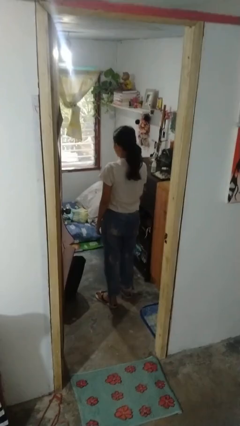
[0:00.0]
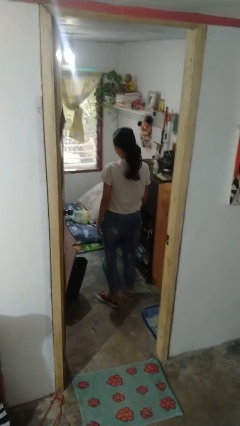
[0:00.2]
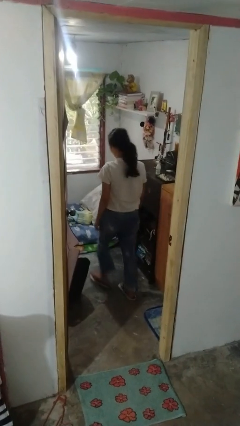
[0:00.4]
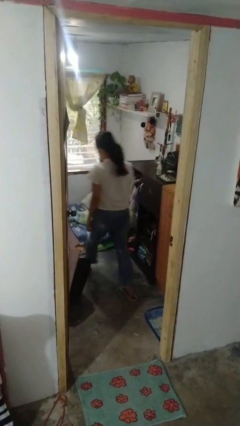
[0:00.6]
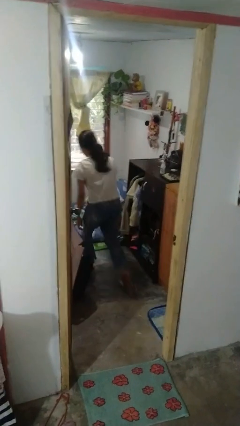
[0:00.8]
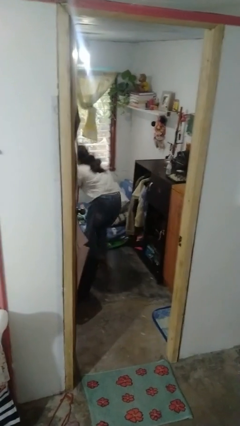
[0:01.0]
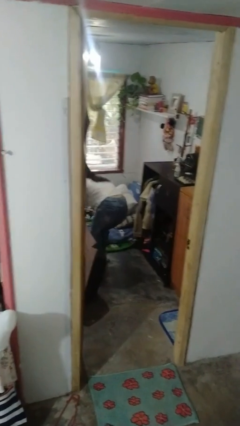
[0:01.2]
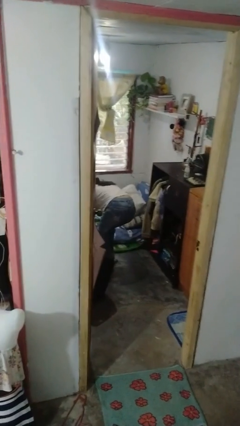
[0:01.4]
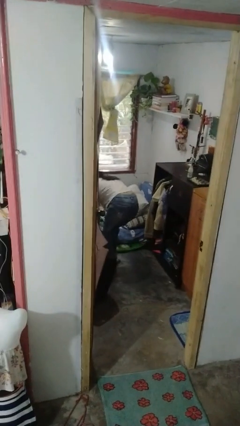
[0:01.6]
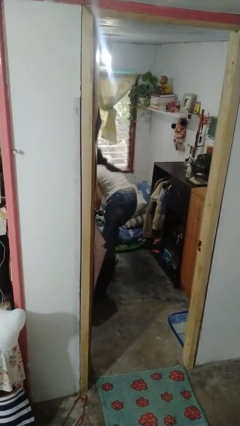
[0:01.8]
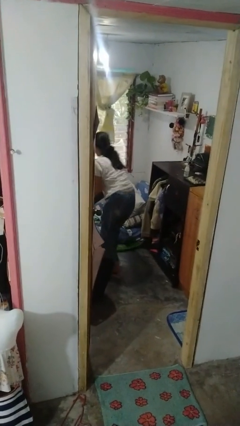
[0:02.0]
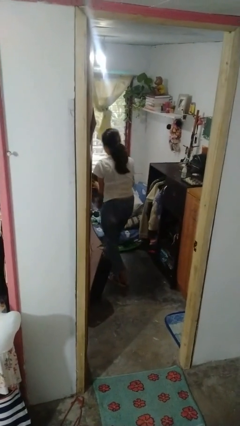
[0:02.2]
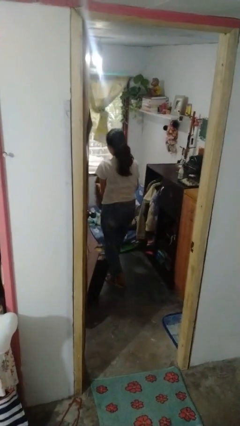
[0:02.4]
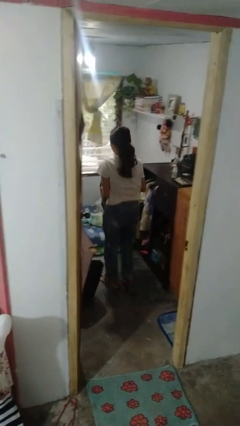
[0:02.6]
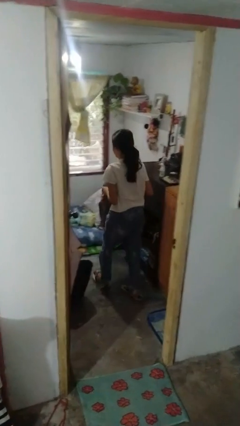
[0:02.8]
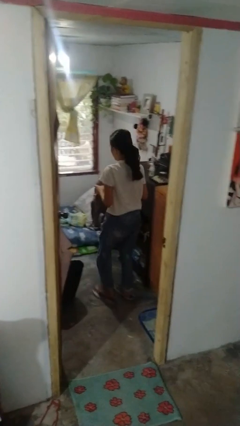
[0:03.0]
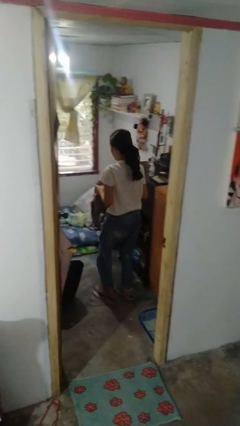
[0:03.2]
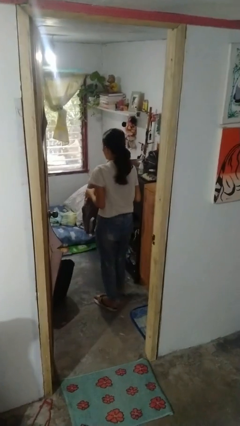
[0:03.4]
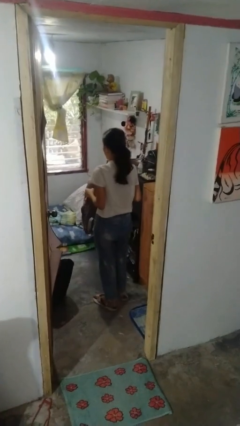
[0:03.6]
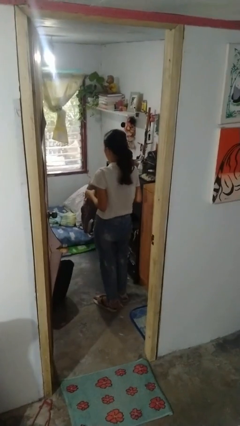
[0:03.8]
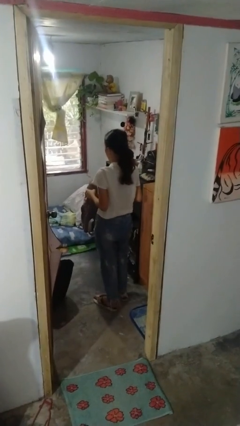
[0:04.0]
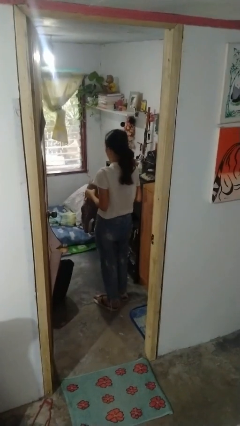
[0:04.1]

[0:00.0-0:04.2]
person picks up object from bed

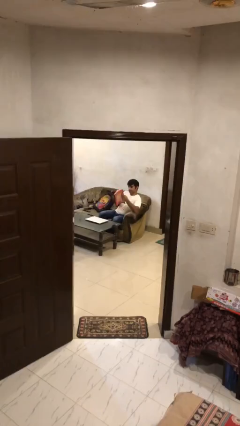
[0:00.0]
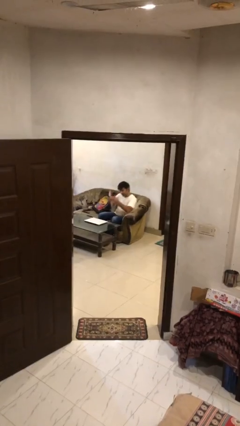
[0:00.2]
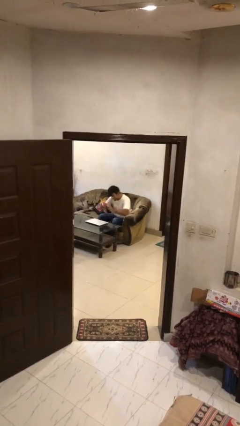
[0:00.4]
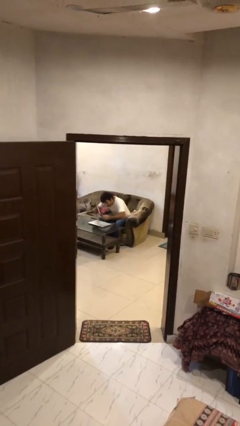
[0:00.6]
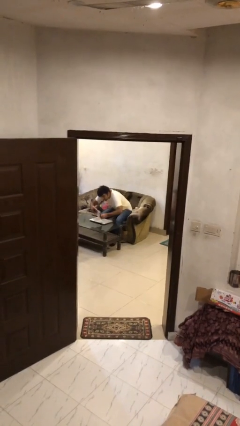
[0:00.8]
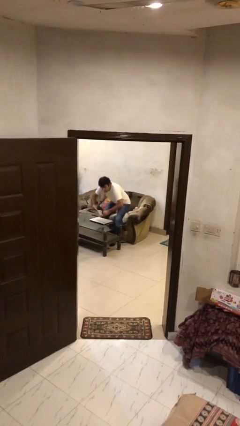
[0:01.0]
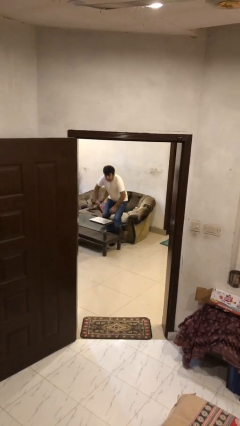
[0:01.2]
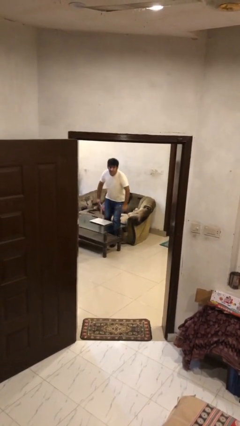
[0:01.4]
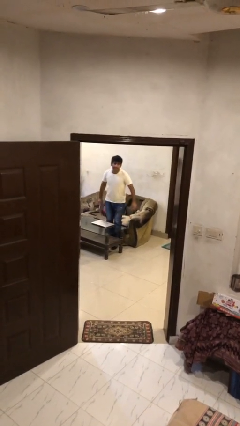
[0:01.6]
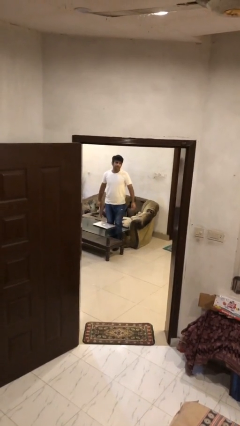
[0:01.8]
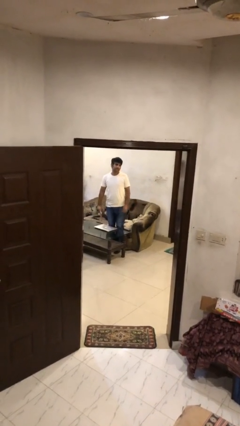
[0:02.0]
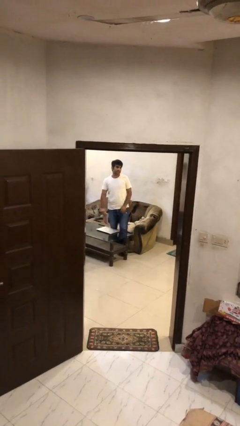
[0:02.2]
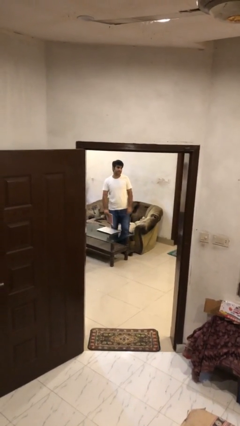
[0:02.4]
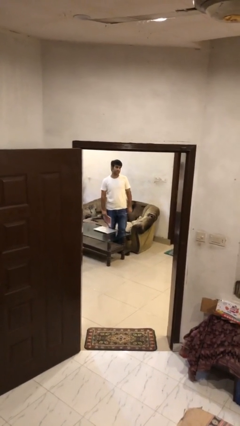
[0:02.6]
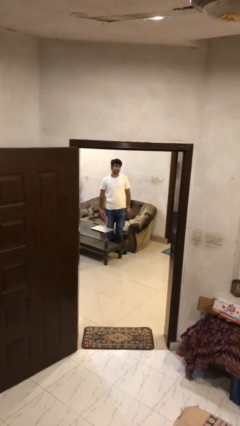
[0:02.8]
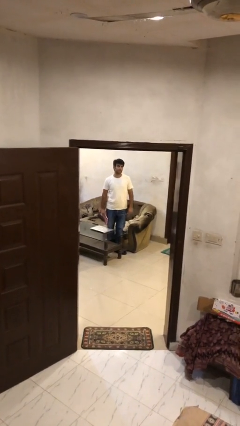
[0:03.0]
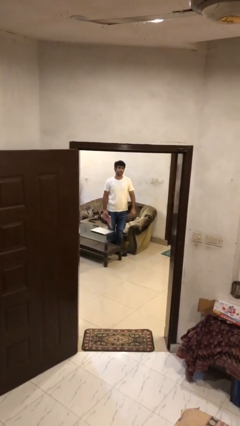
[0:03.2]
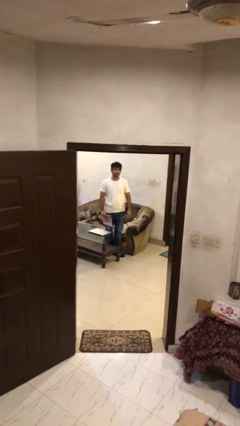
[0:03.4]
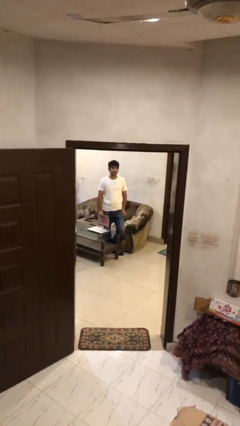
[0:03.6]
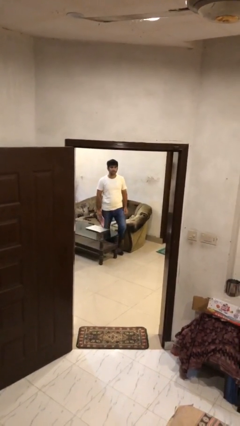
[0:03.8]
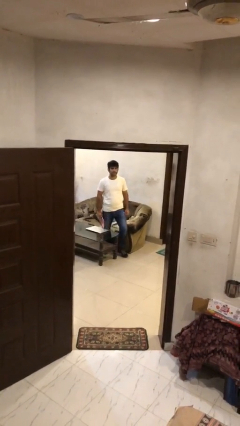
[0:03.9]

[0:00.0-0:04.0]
person stands up

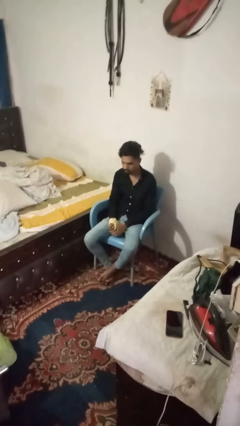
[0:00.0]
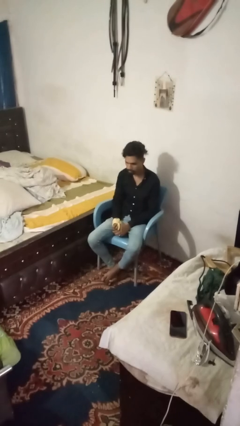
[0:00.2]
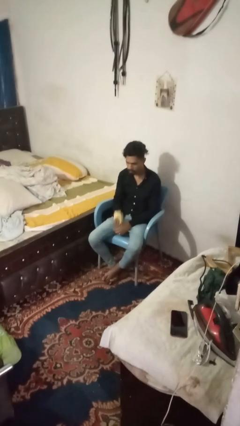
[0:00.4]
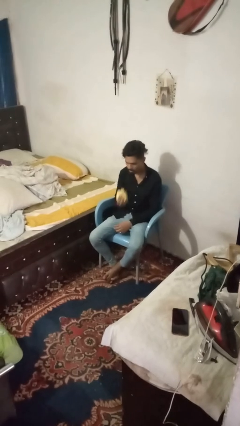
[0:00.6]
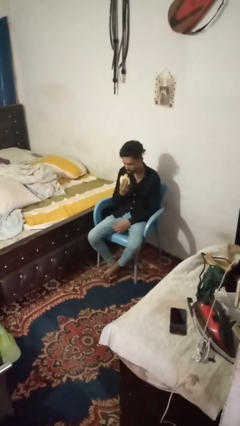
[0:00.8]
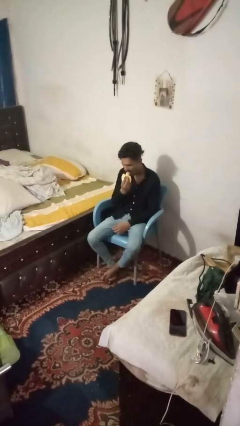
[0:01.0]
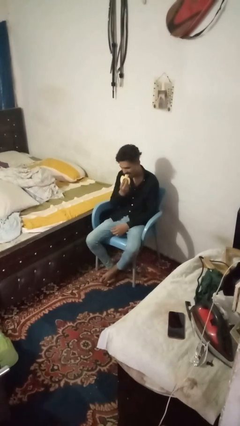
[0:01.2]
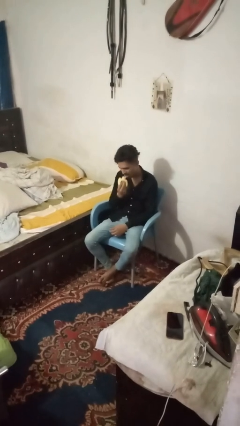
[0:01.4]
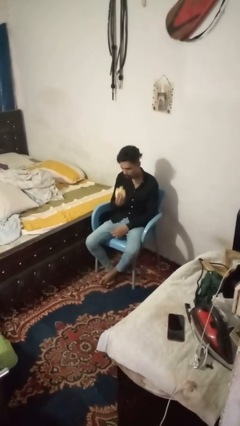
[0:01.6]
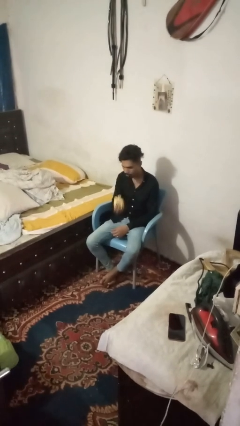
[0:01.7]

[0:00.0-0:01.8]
person eats banana

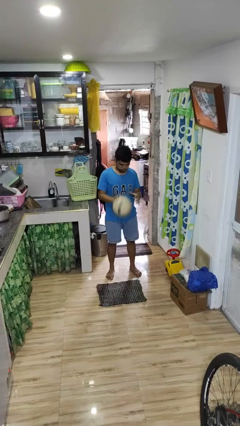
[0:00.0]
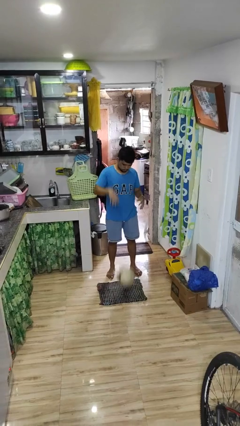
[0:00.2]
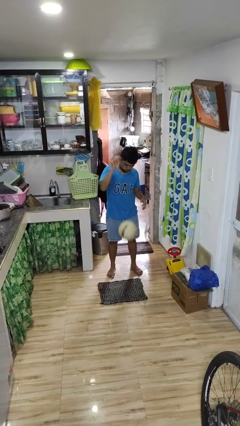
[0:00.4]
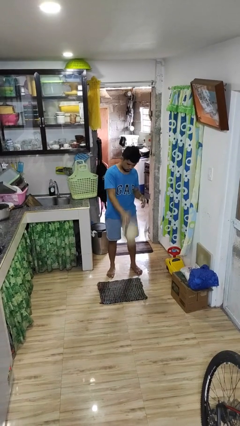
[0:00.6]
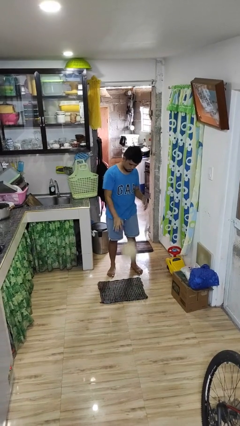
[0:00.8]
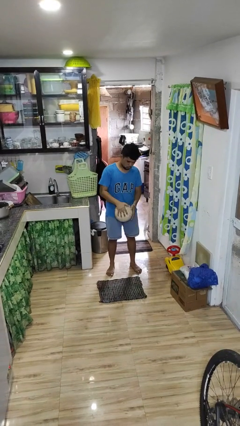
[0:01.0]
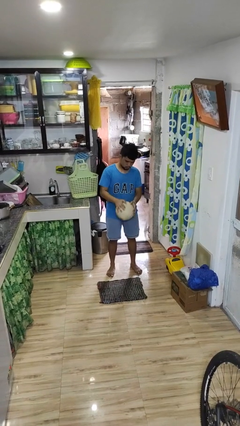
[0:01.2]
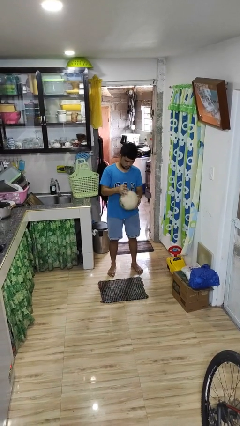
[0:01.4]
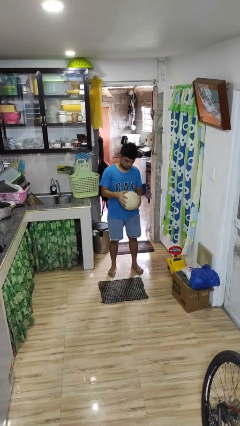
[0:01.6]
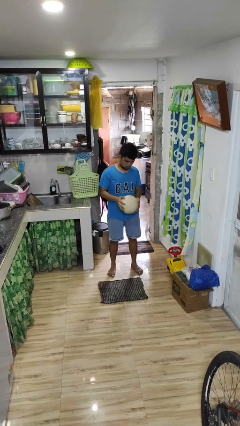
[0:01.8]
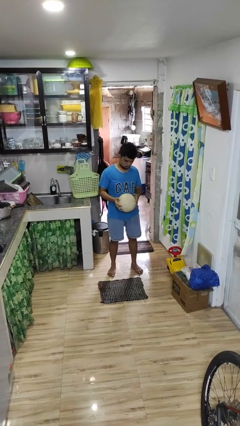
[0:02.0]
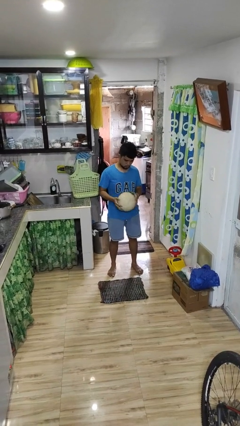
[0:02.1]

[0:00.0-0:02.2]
person bounces ball on floor

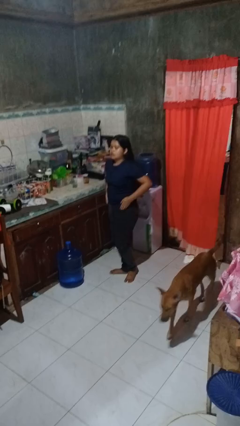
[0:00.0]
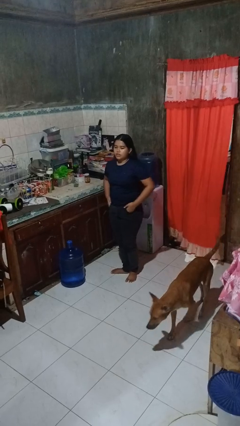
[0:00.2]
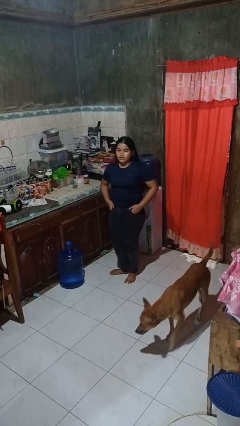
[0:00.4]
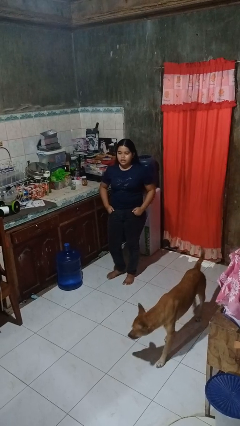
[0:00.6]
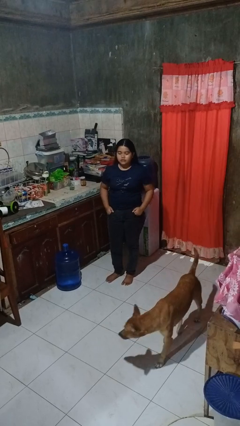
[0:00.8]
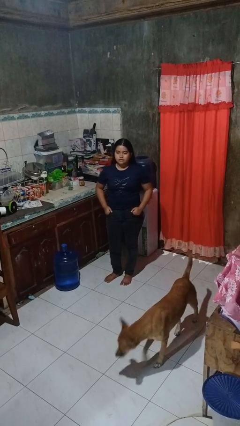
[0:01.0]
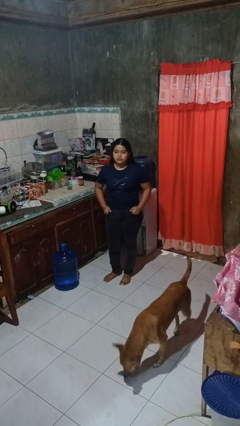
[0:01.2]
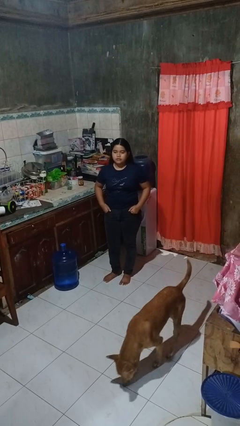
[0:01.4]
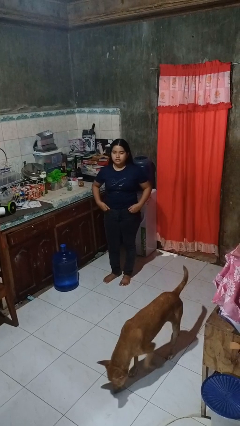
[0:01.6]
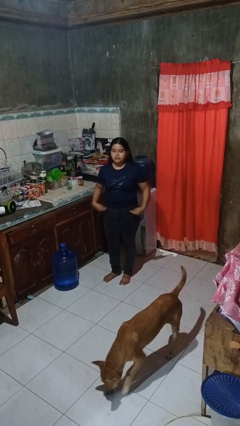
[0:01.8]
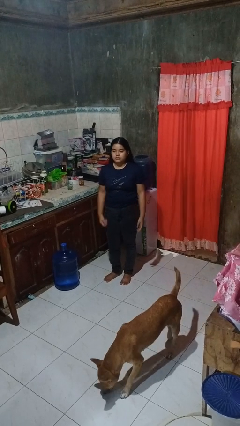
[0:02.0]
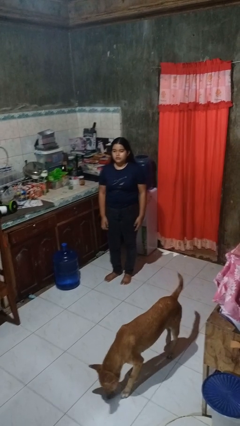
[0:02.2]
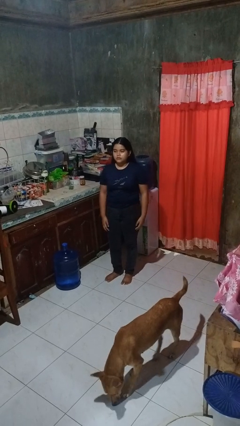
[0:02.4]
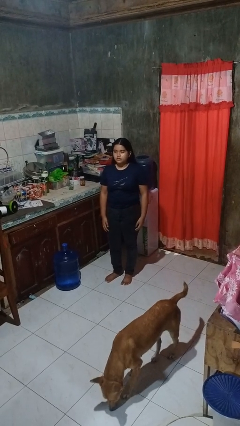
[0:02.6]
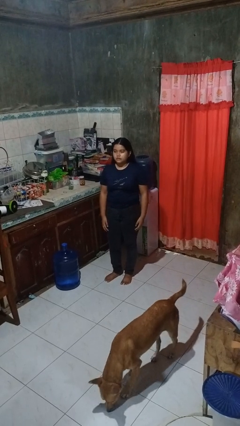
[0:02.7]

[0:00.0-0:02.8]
person puts hands in back pockets

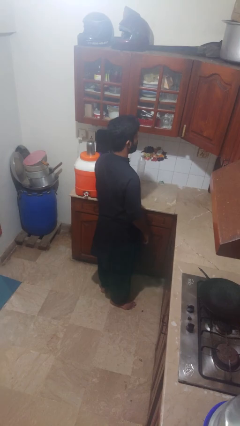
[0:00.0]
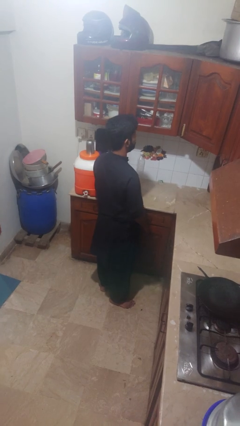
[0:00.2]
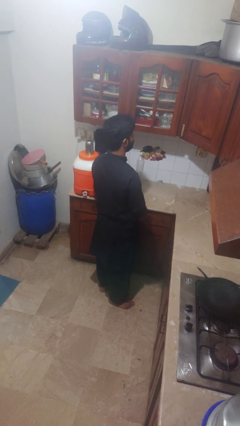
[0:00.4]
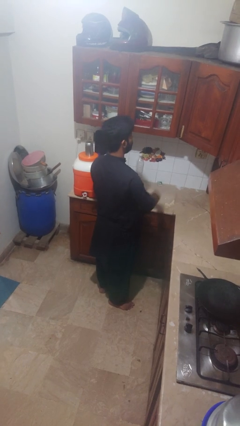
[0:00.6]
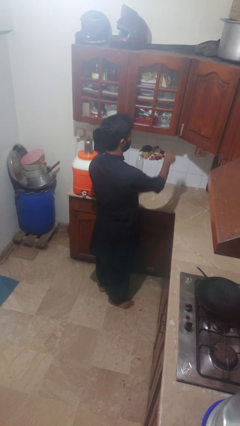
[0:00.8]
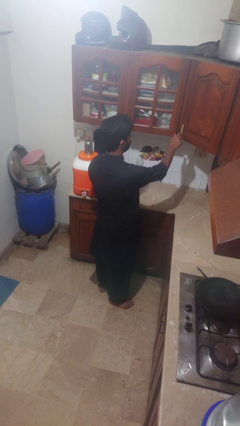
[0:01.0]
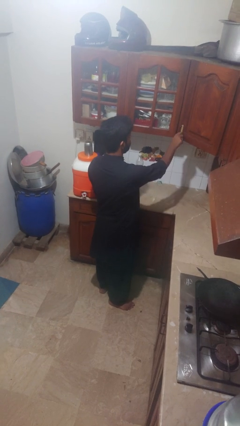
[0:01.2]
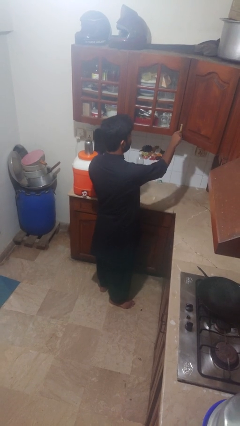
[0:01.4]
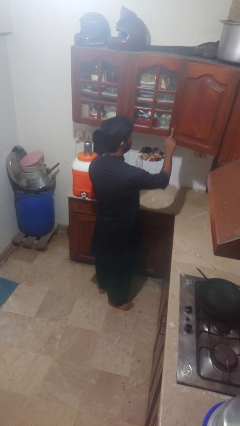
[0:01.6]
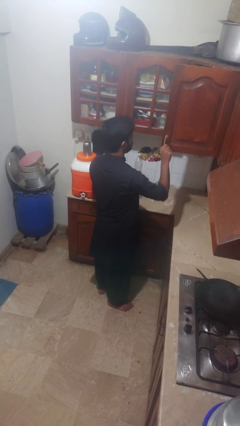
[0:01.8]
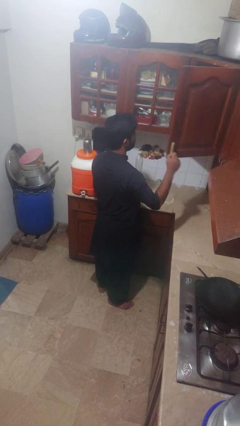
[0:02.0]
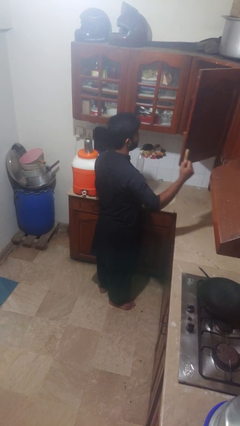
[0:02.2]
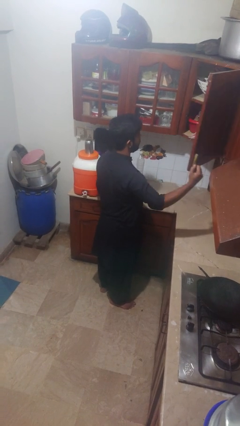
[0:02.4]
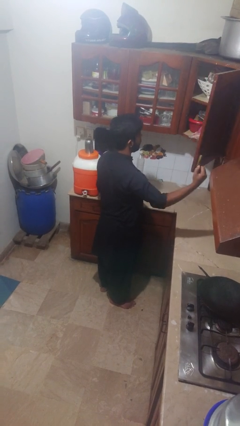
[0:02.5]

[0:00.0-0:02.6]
person opens cabinet
